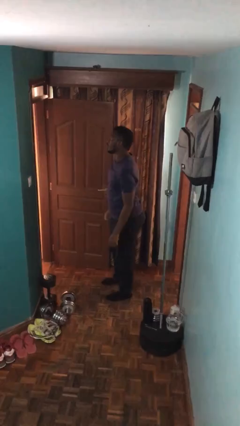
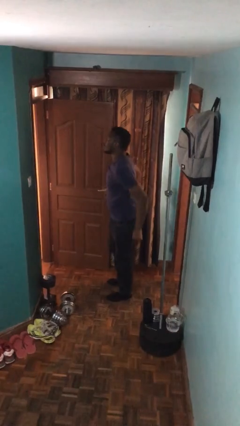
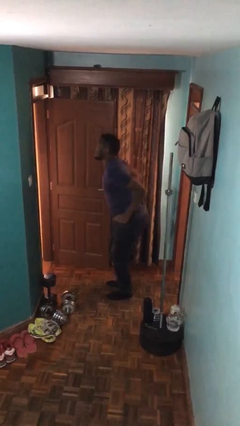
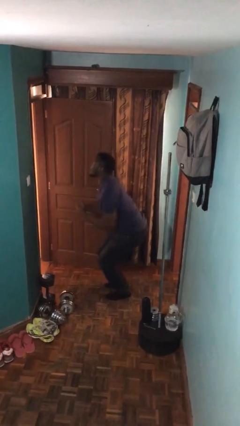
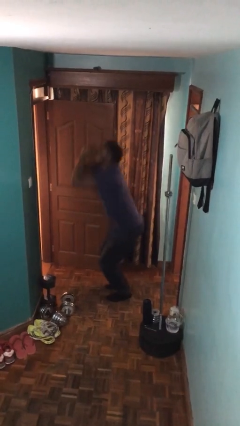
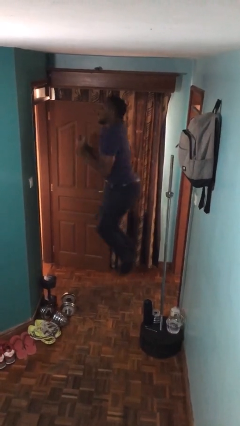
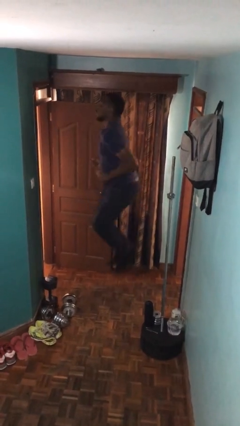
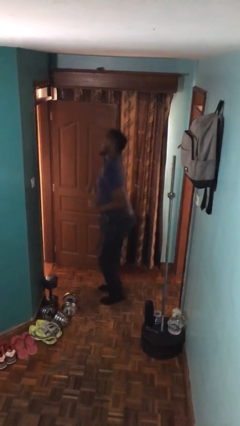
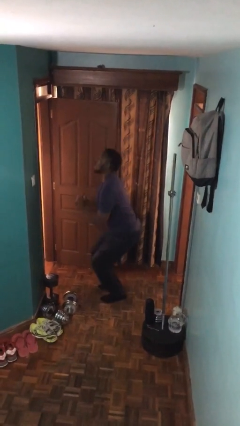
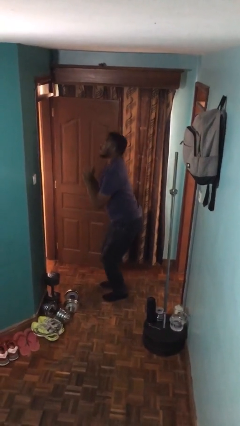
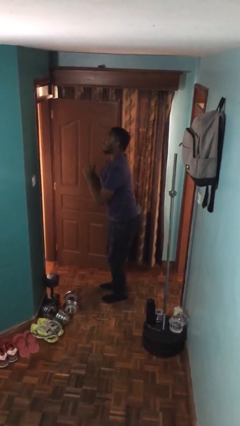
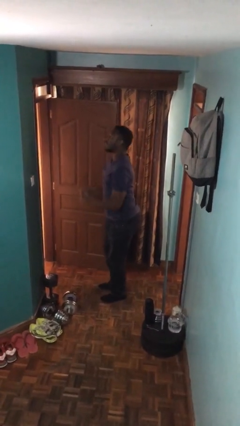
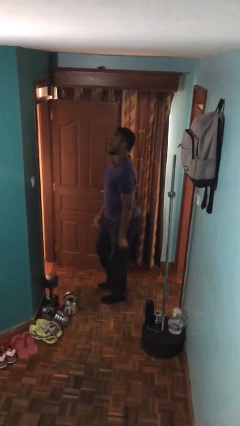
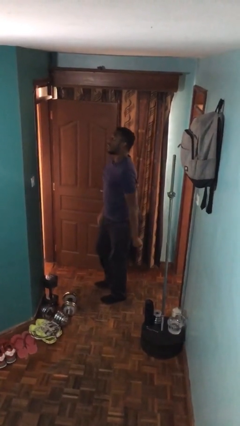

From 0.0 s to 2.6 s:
person jumps

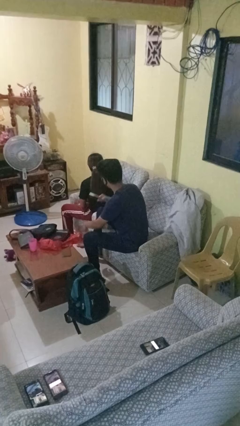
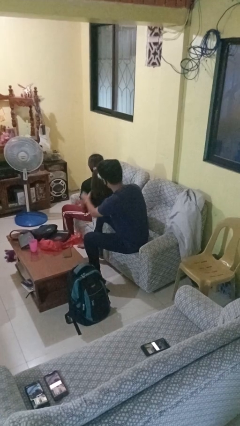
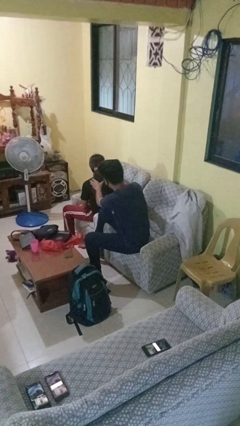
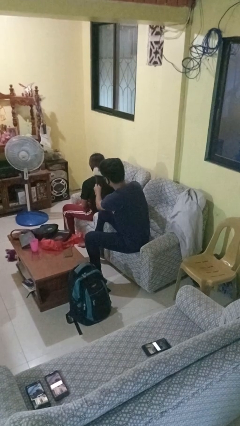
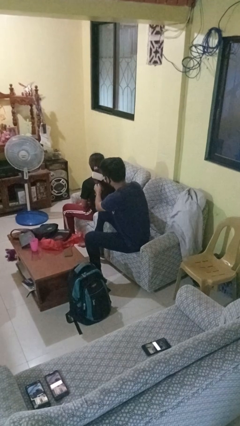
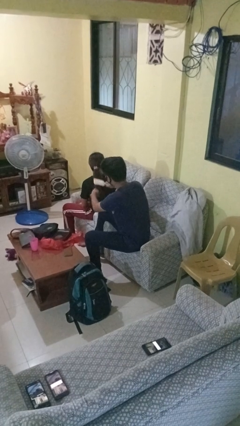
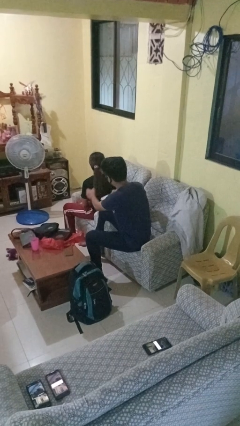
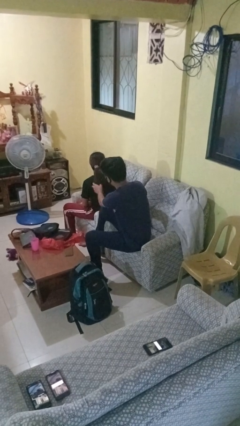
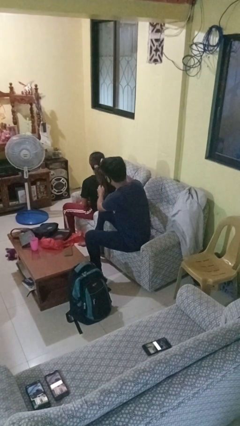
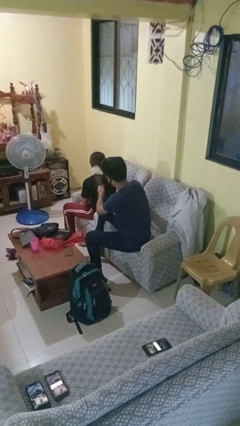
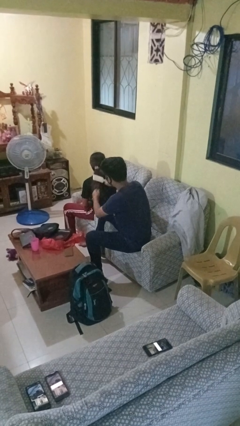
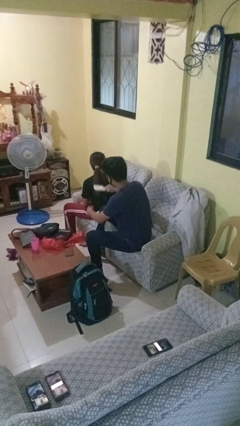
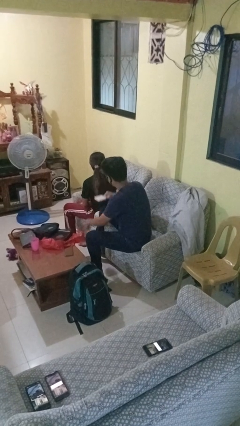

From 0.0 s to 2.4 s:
person brushes hair of person

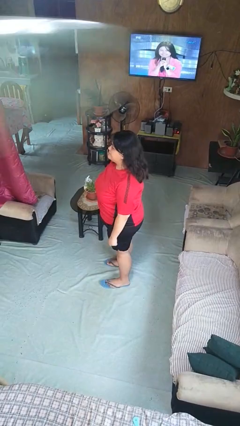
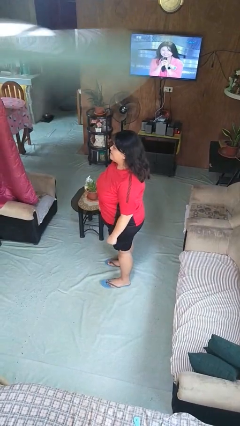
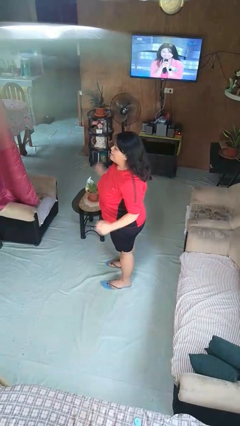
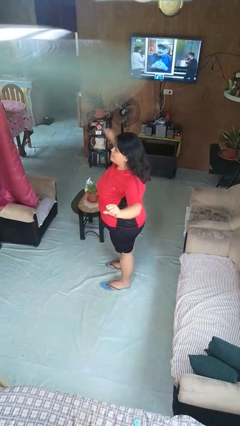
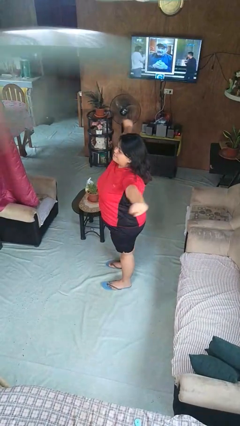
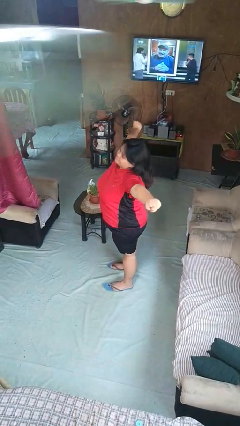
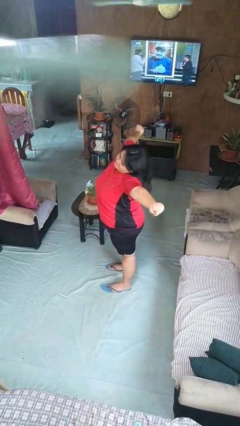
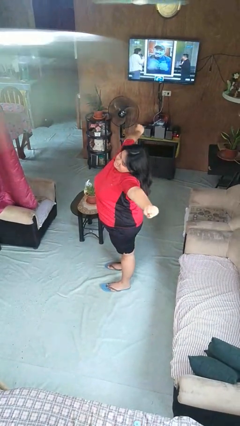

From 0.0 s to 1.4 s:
person stretches arms to side

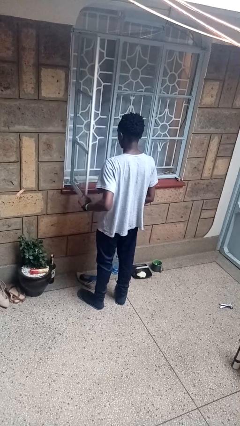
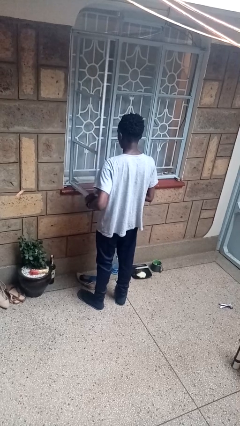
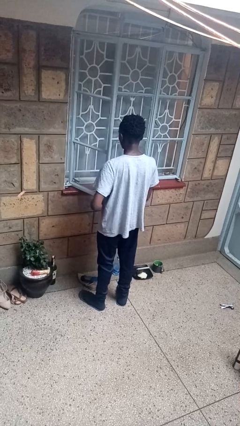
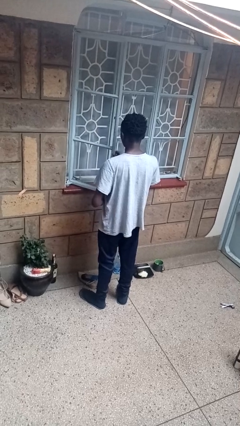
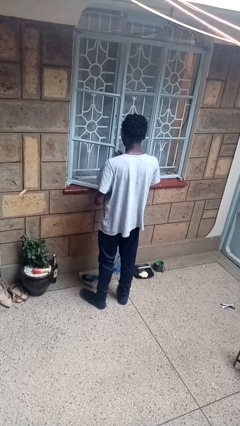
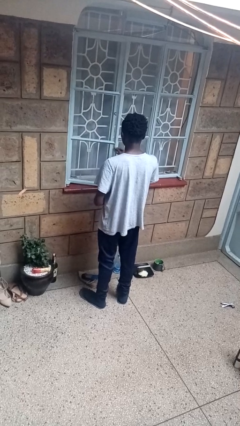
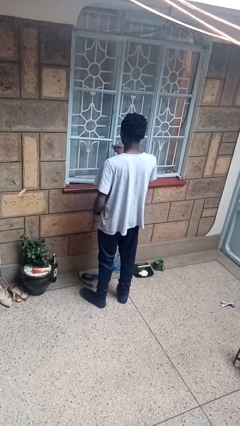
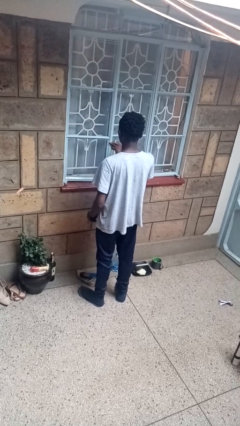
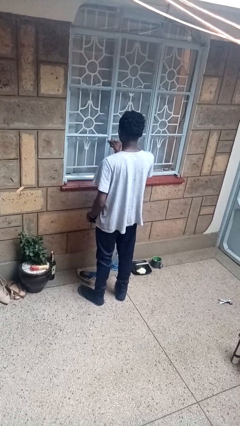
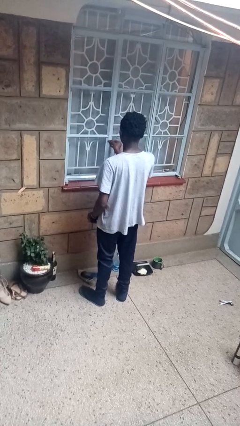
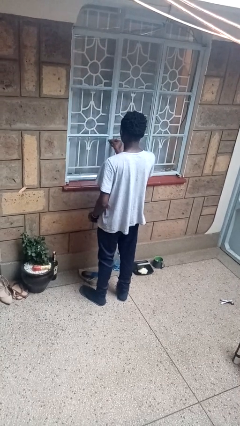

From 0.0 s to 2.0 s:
person closes home window

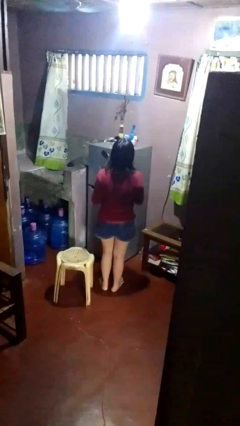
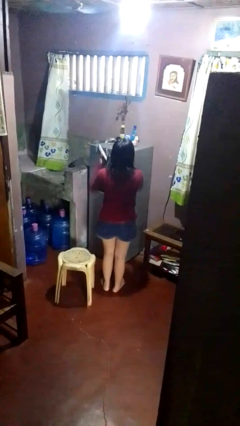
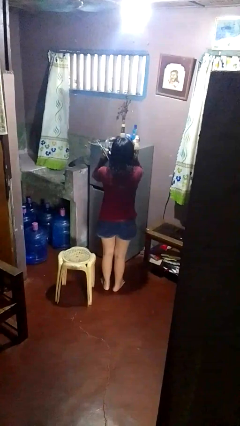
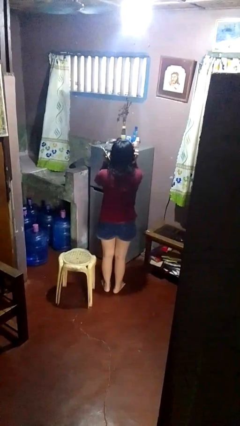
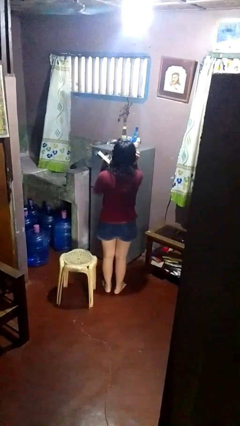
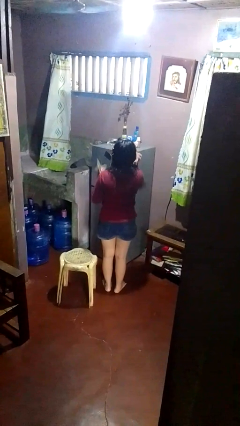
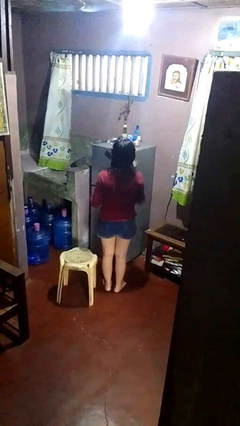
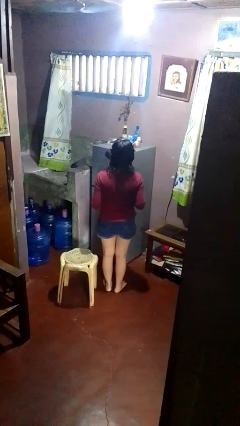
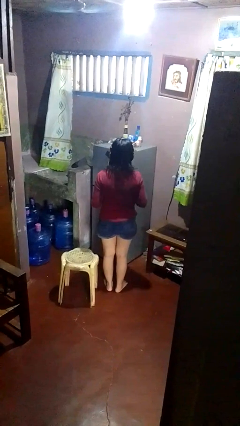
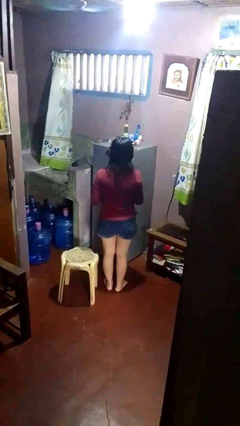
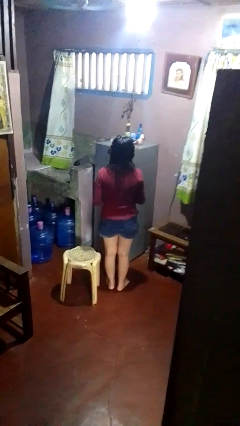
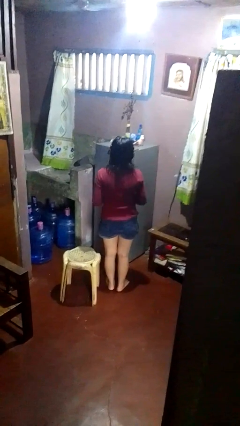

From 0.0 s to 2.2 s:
person puts on headphones

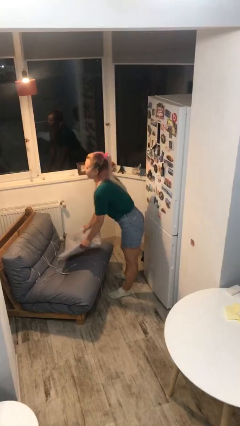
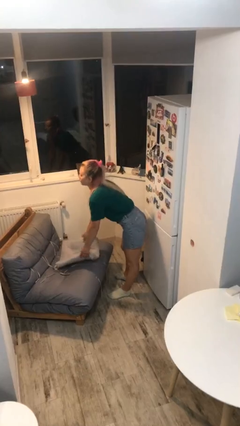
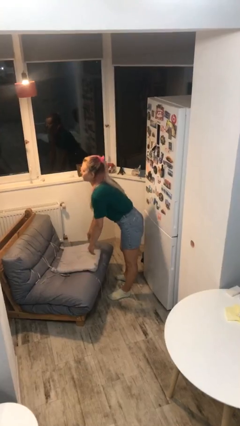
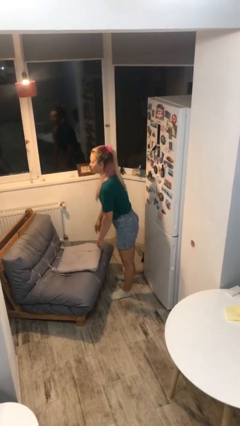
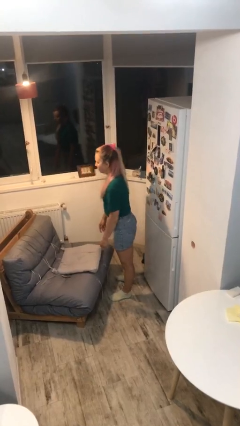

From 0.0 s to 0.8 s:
person puts down object on couch

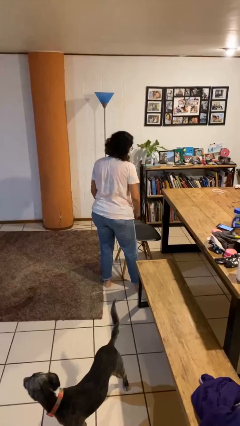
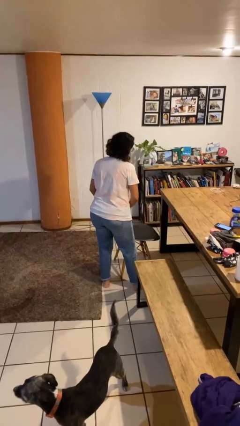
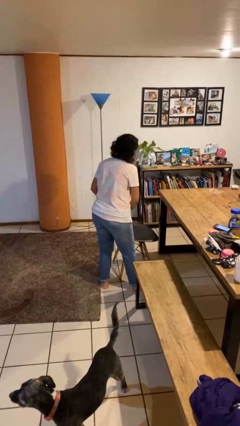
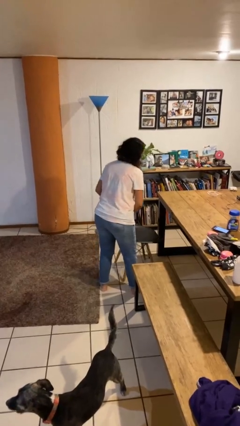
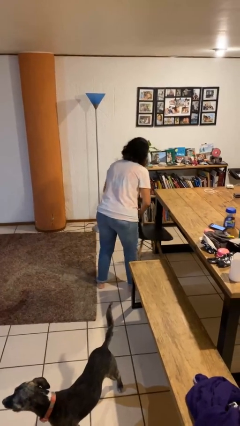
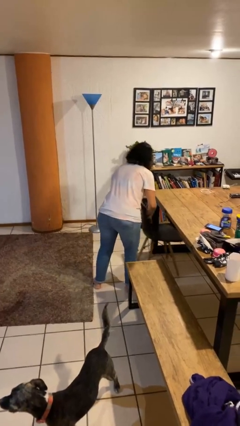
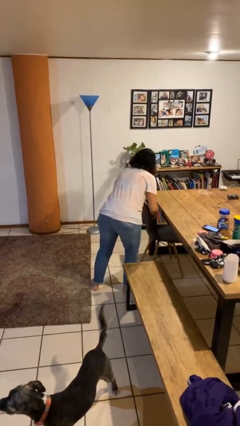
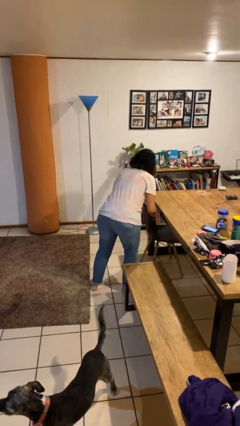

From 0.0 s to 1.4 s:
person pushes in chair

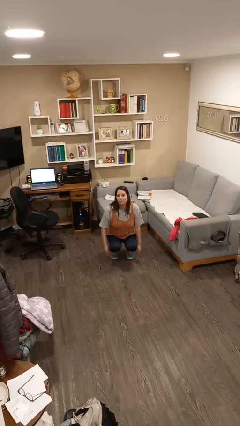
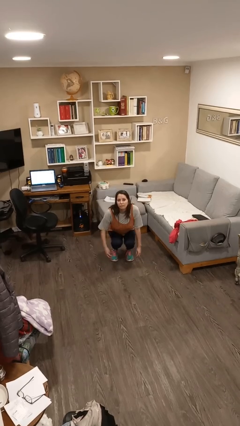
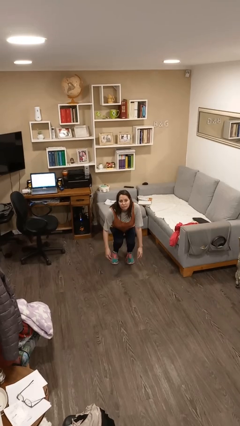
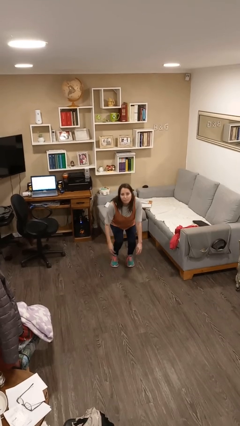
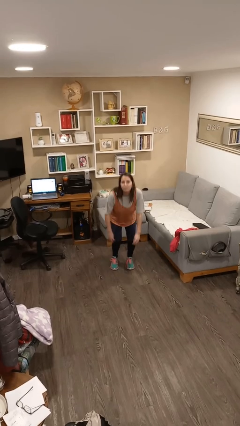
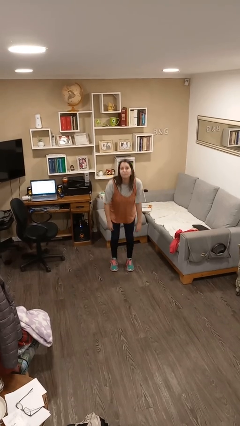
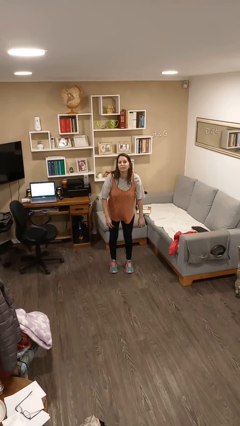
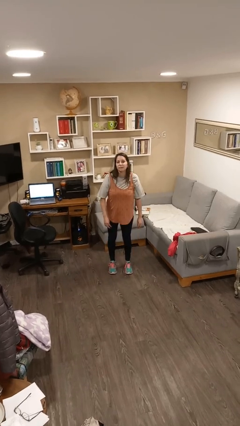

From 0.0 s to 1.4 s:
person stands up

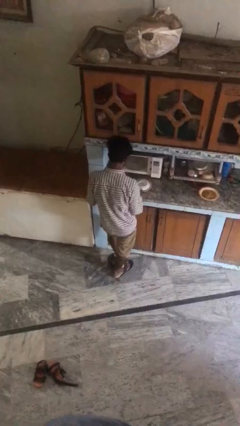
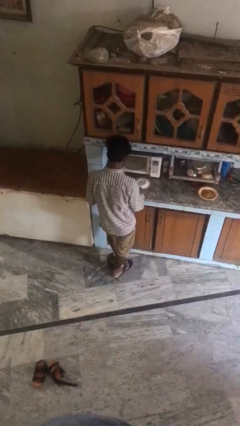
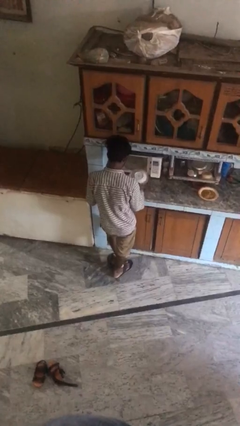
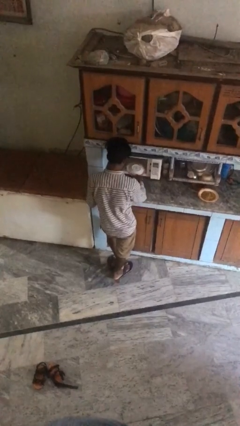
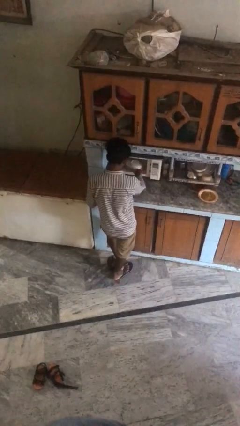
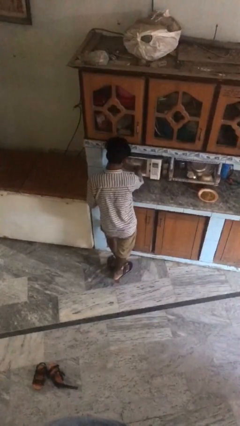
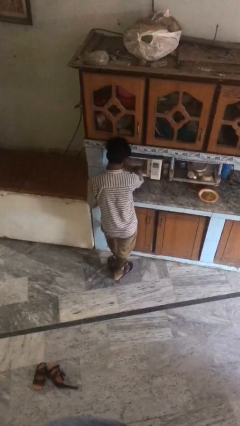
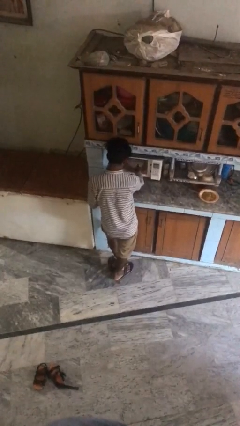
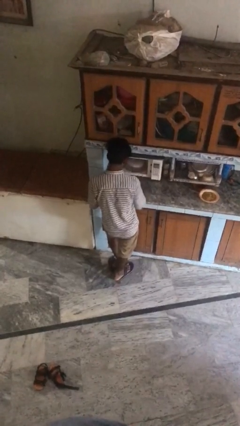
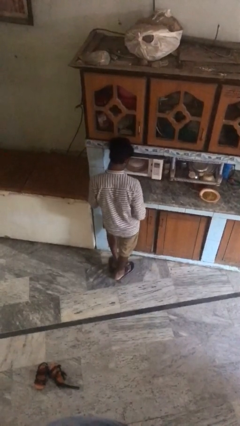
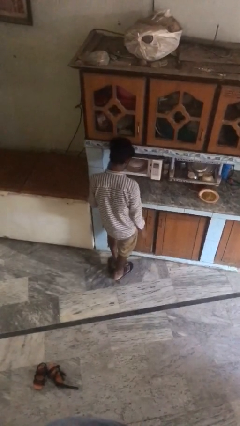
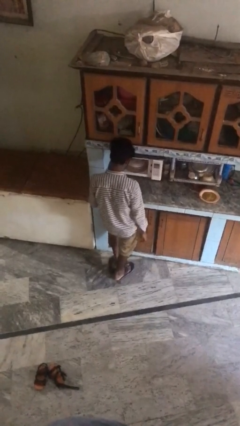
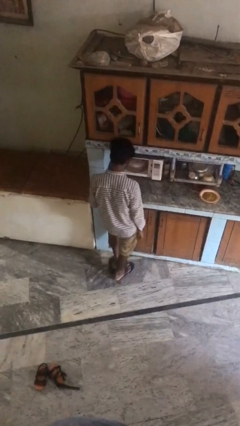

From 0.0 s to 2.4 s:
person puts object into oven
